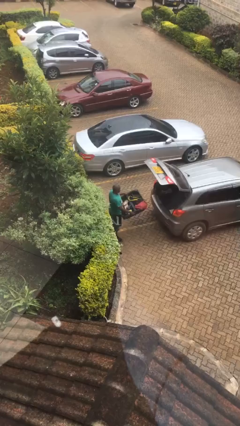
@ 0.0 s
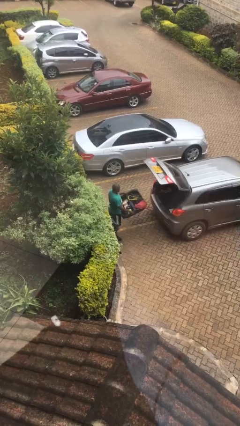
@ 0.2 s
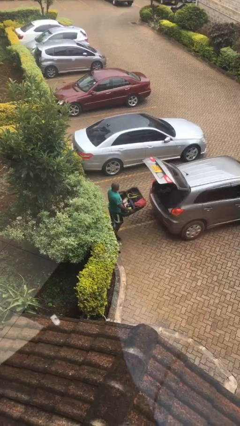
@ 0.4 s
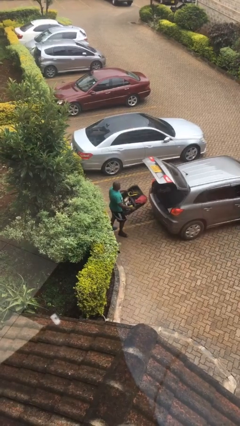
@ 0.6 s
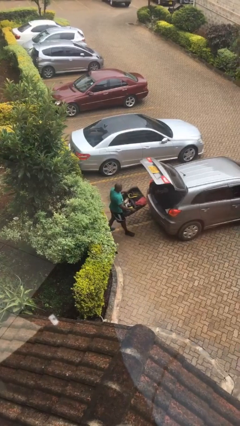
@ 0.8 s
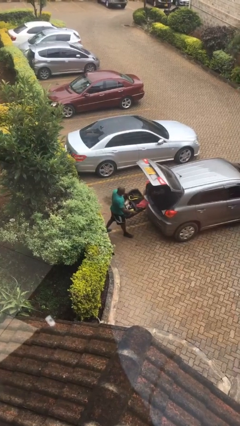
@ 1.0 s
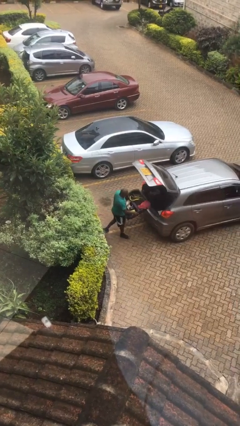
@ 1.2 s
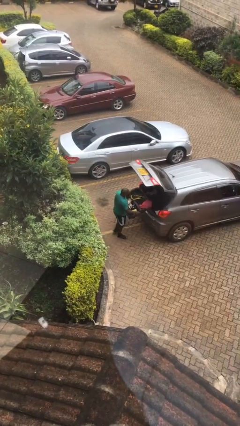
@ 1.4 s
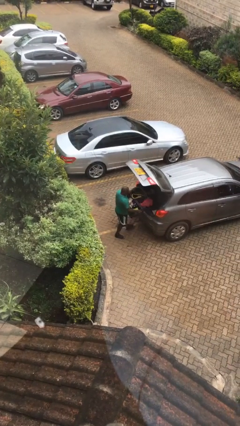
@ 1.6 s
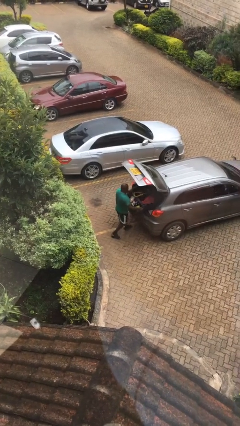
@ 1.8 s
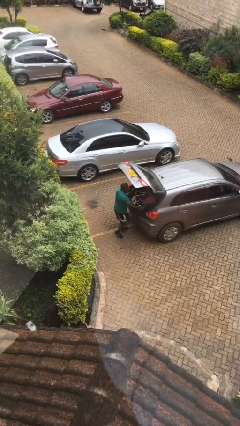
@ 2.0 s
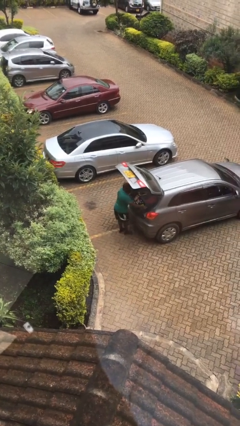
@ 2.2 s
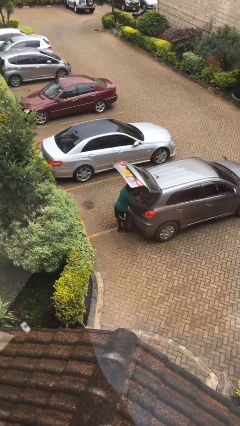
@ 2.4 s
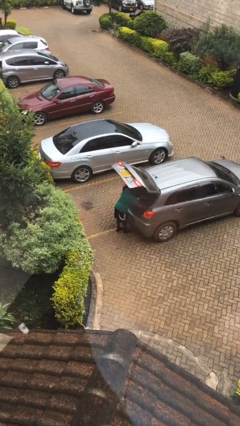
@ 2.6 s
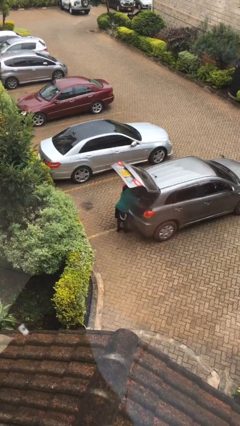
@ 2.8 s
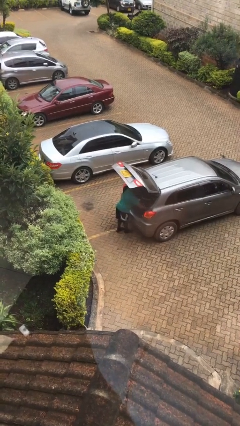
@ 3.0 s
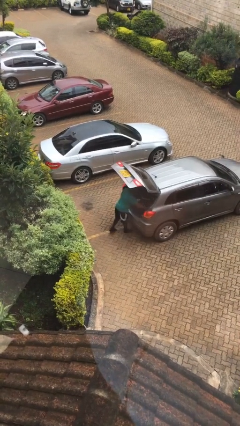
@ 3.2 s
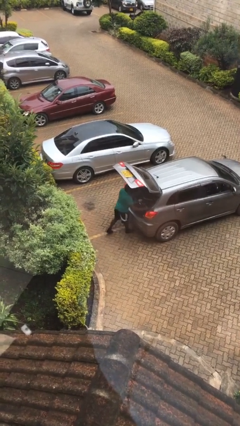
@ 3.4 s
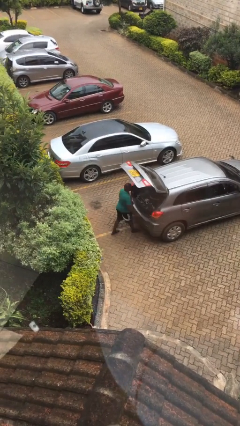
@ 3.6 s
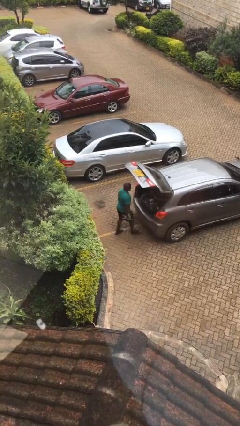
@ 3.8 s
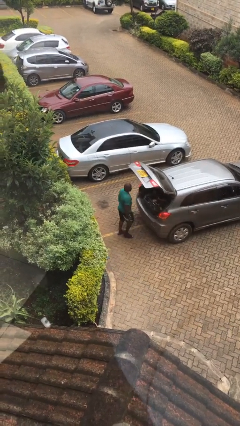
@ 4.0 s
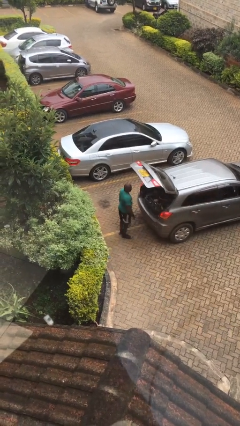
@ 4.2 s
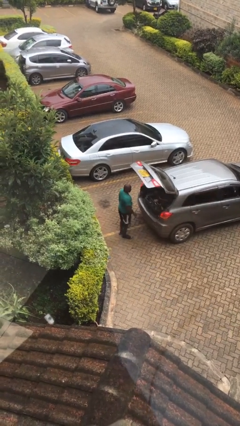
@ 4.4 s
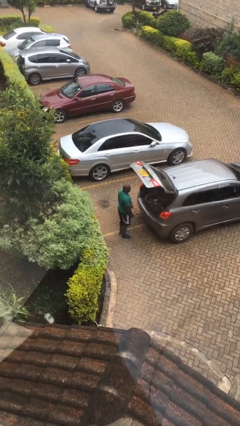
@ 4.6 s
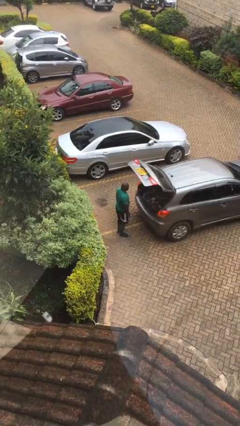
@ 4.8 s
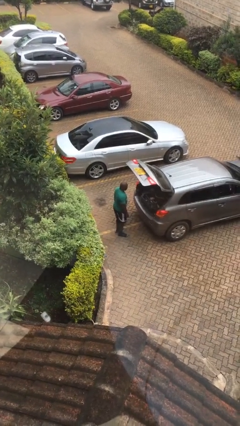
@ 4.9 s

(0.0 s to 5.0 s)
person loads car

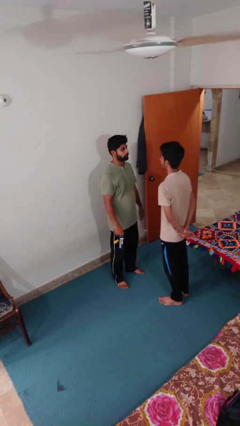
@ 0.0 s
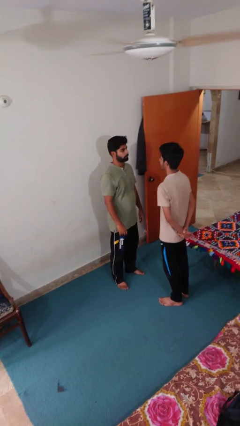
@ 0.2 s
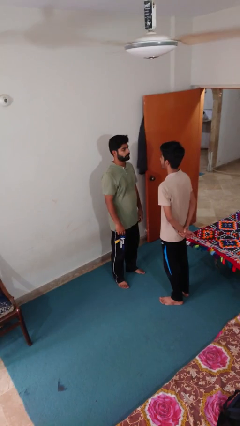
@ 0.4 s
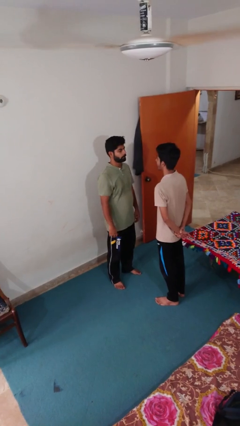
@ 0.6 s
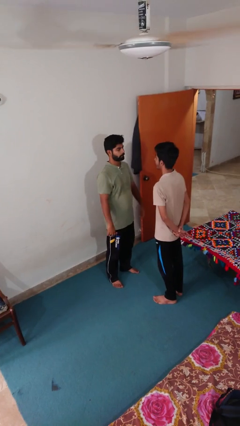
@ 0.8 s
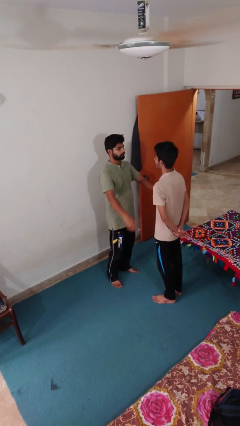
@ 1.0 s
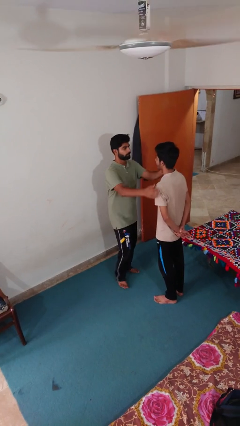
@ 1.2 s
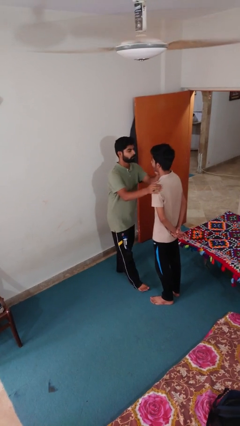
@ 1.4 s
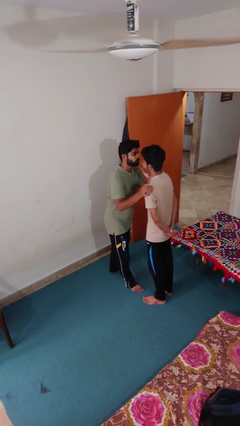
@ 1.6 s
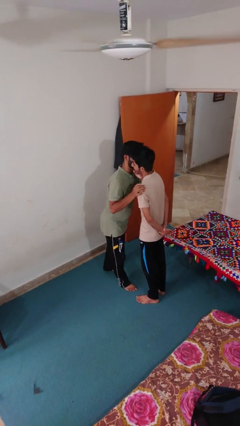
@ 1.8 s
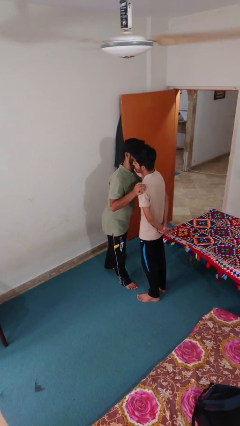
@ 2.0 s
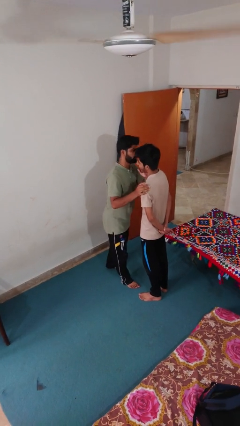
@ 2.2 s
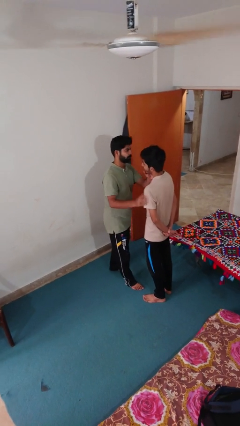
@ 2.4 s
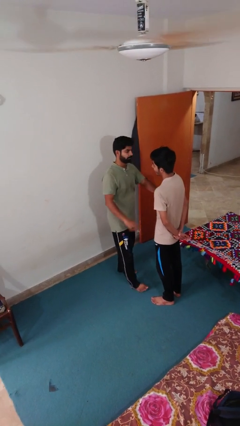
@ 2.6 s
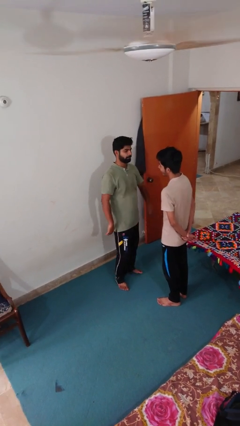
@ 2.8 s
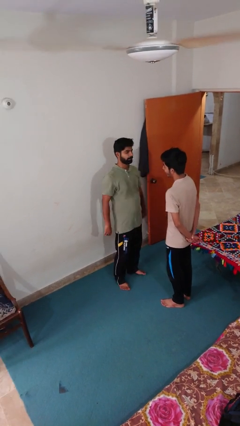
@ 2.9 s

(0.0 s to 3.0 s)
person kisses cheek of person

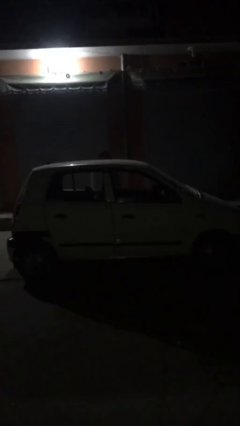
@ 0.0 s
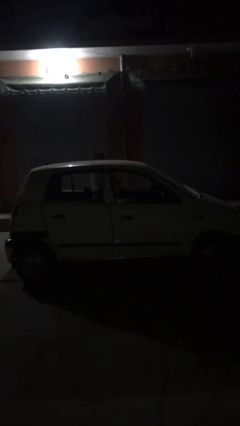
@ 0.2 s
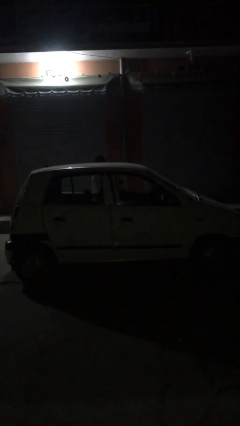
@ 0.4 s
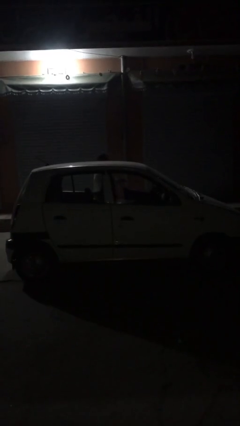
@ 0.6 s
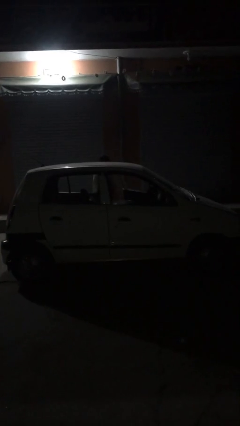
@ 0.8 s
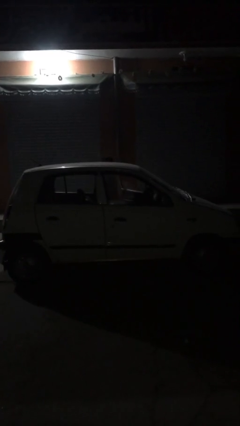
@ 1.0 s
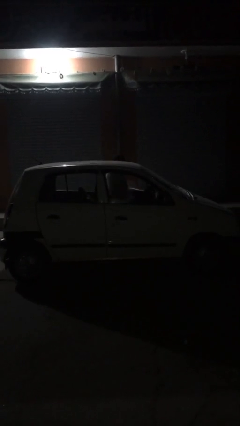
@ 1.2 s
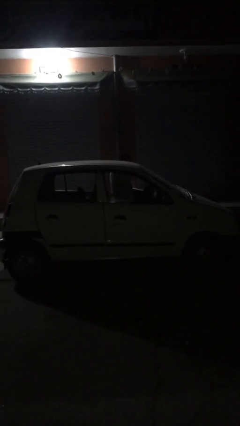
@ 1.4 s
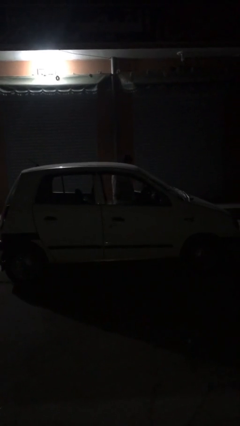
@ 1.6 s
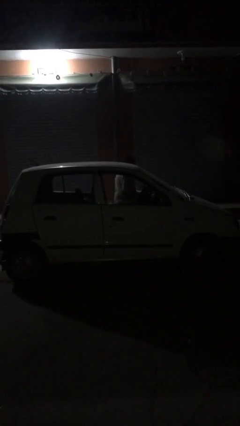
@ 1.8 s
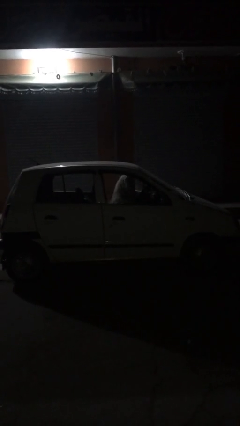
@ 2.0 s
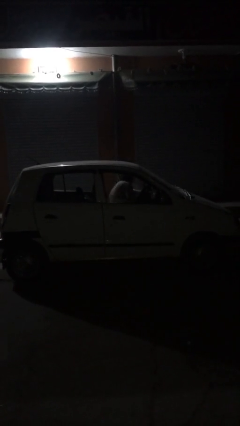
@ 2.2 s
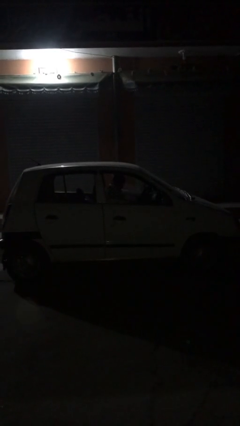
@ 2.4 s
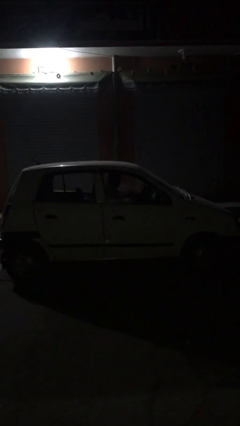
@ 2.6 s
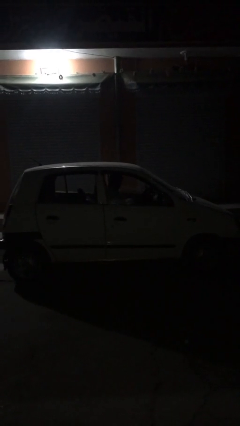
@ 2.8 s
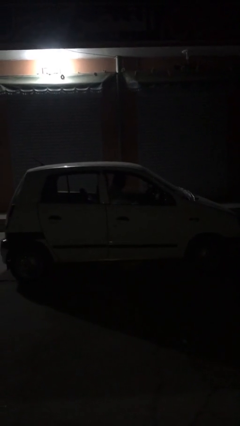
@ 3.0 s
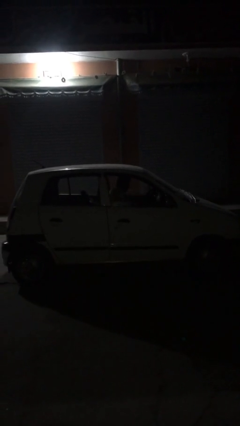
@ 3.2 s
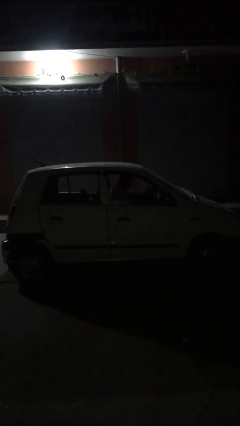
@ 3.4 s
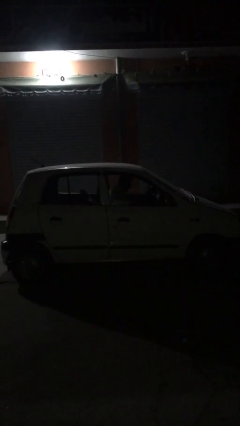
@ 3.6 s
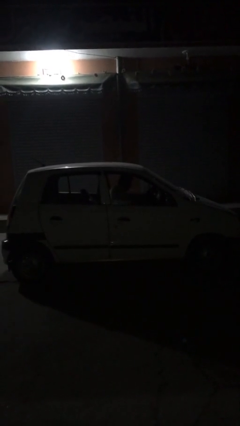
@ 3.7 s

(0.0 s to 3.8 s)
person enters car

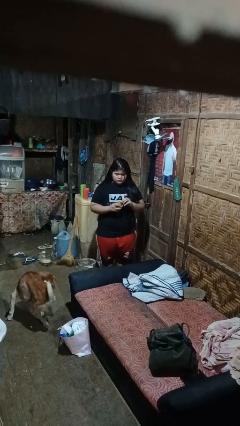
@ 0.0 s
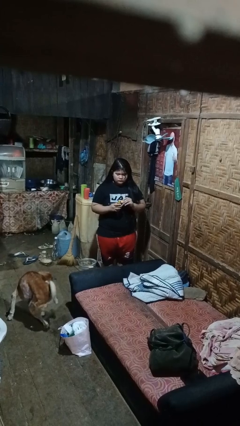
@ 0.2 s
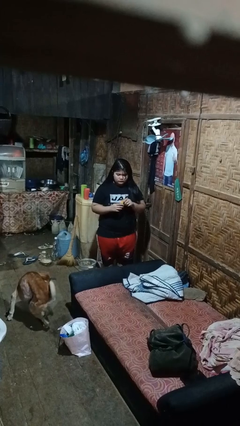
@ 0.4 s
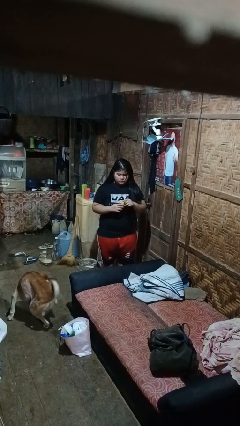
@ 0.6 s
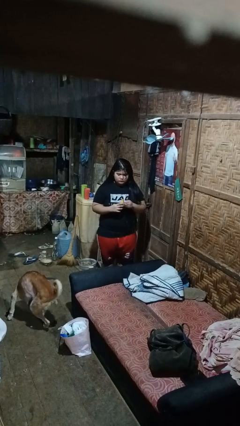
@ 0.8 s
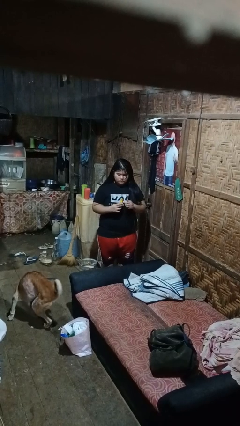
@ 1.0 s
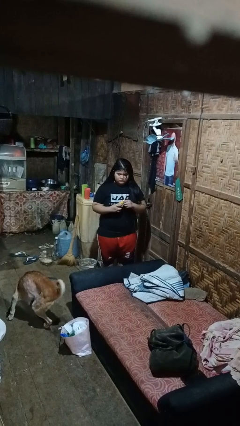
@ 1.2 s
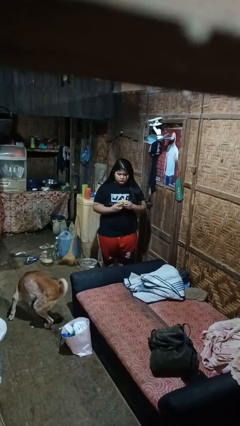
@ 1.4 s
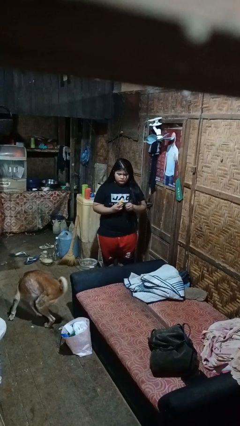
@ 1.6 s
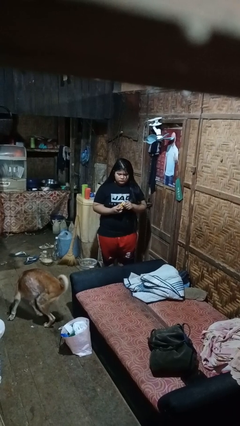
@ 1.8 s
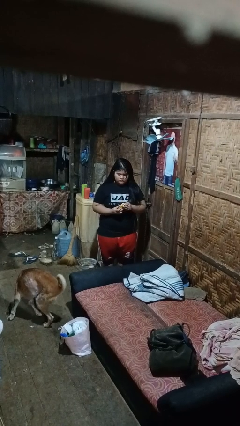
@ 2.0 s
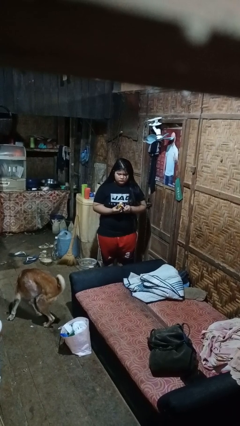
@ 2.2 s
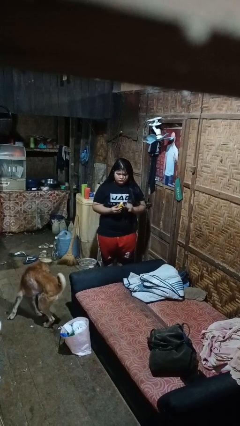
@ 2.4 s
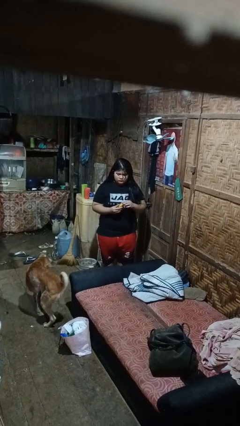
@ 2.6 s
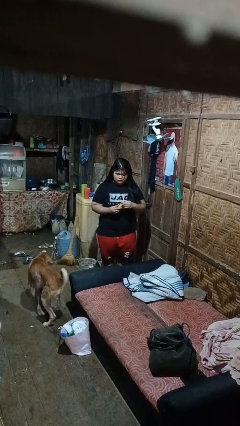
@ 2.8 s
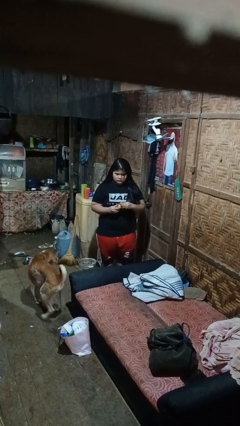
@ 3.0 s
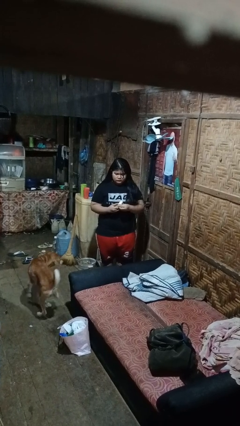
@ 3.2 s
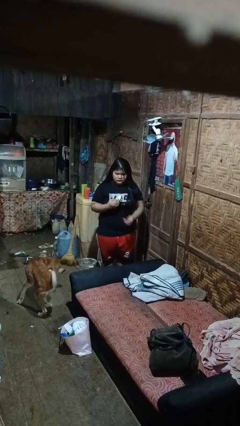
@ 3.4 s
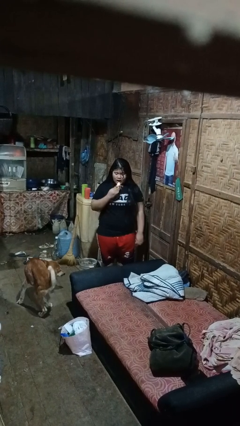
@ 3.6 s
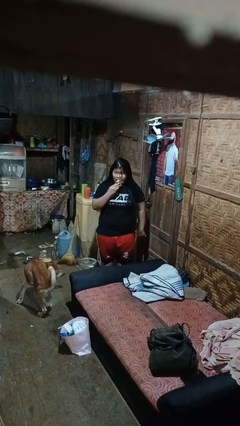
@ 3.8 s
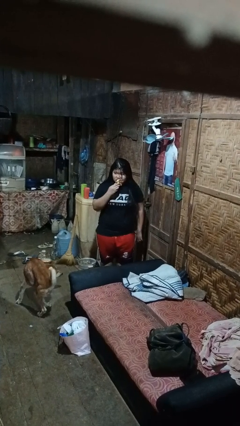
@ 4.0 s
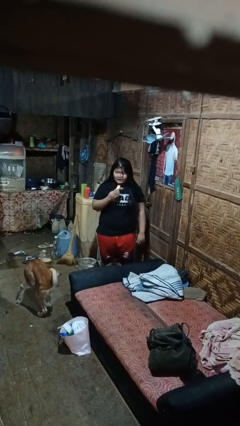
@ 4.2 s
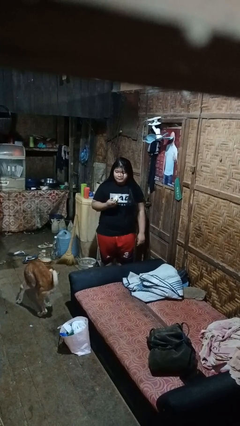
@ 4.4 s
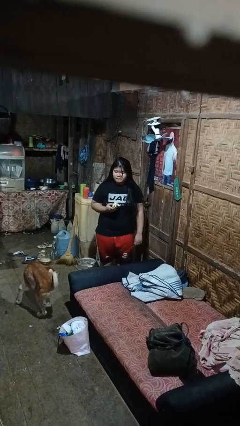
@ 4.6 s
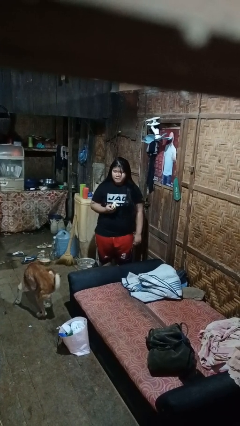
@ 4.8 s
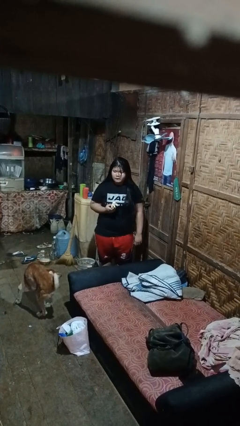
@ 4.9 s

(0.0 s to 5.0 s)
person eats banana

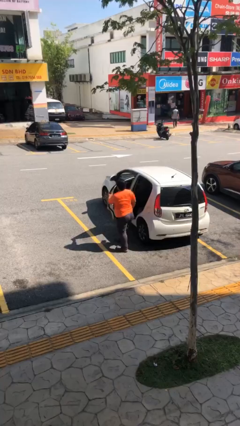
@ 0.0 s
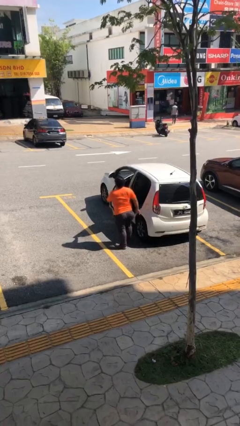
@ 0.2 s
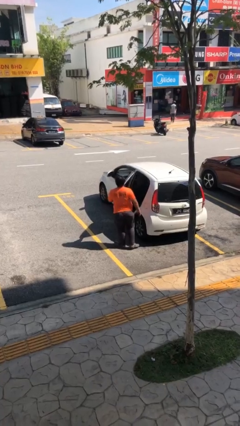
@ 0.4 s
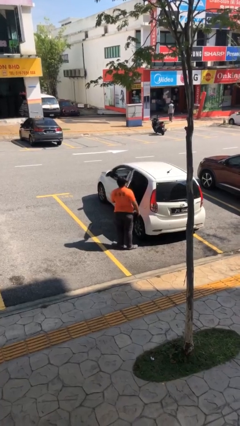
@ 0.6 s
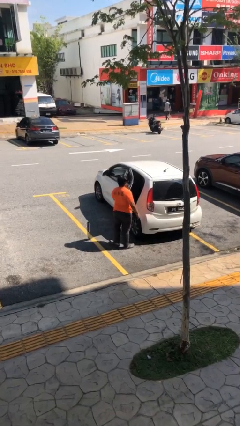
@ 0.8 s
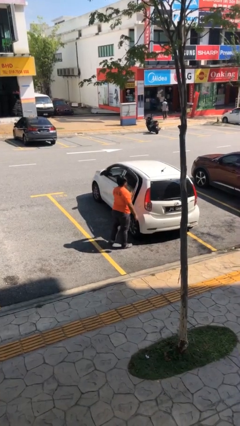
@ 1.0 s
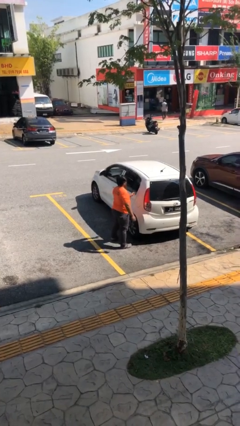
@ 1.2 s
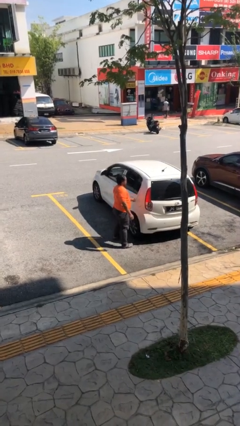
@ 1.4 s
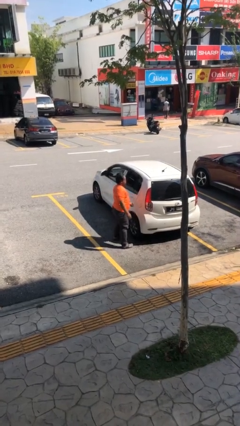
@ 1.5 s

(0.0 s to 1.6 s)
person closes car door
